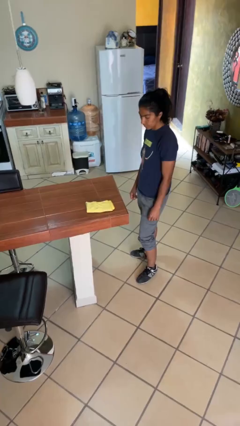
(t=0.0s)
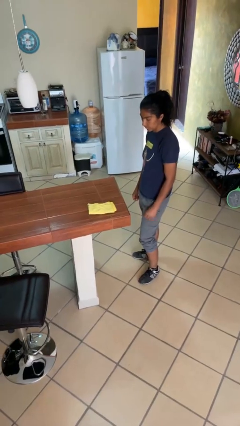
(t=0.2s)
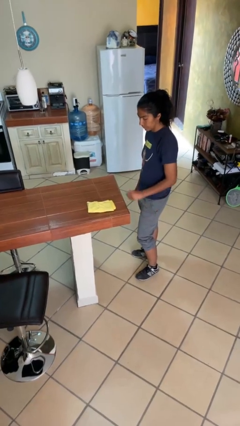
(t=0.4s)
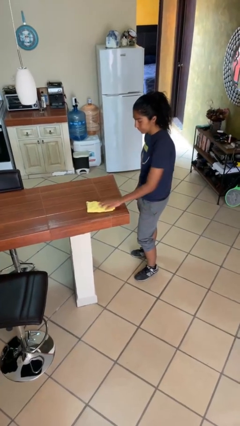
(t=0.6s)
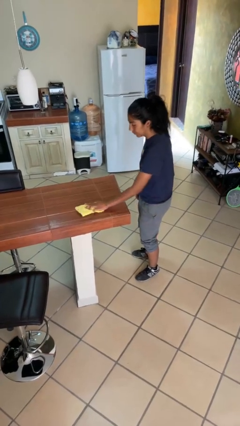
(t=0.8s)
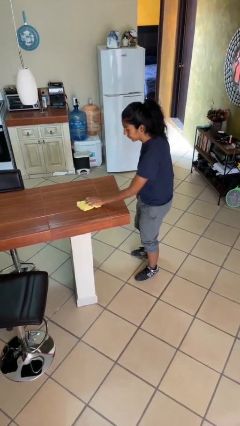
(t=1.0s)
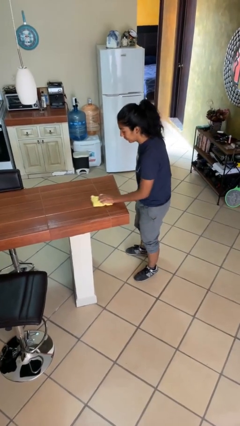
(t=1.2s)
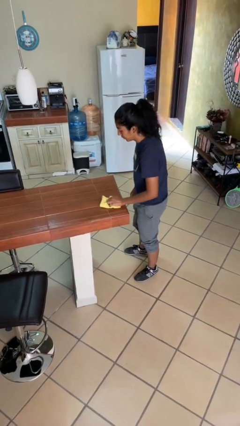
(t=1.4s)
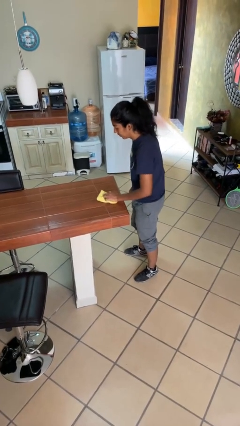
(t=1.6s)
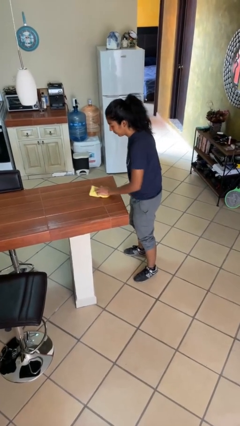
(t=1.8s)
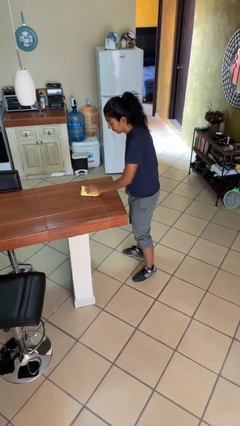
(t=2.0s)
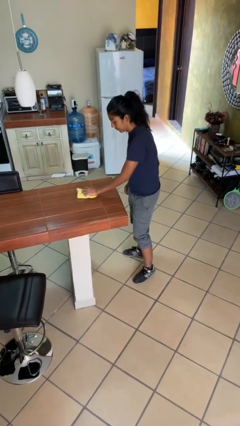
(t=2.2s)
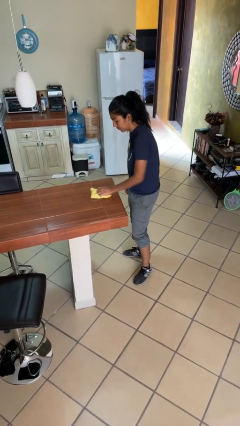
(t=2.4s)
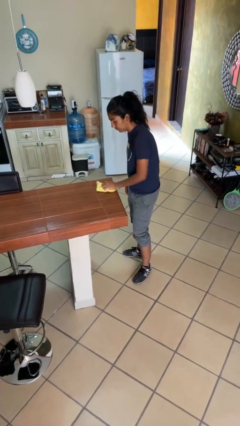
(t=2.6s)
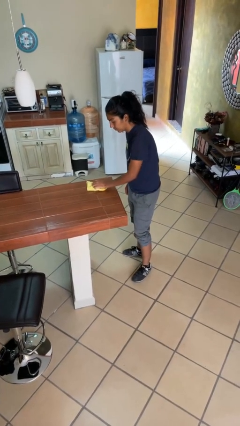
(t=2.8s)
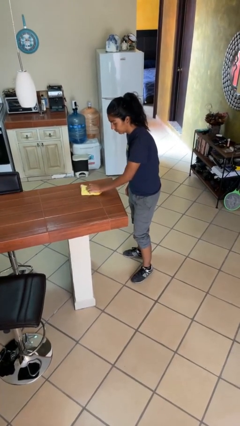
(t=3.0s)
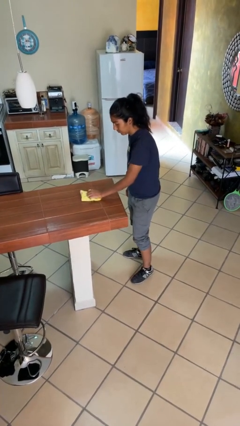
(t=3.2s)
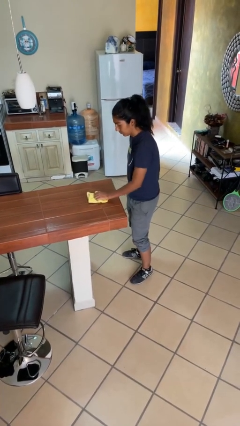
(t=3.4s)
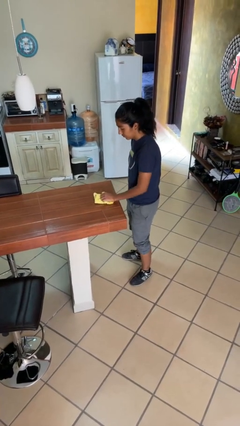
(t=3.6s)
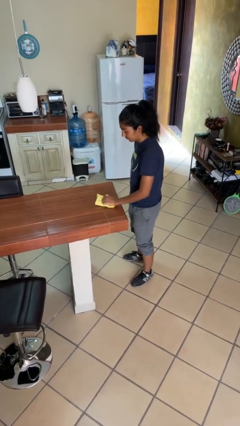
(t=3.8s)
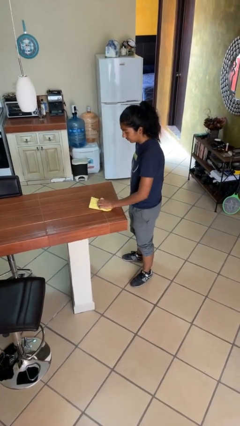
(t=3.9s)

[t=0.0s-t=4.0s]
person cleans table with rag

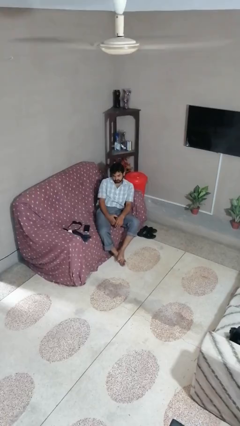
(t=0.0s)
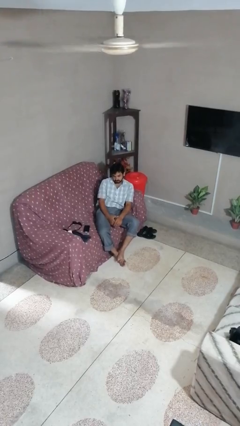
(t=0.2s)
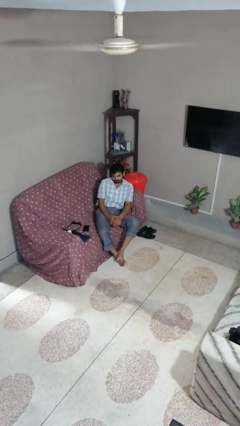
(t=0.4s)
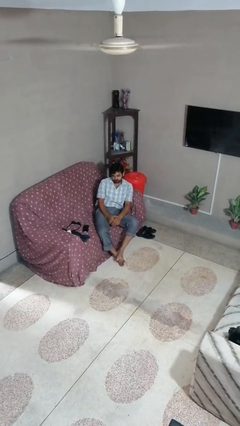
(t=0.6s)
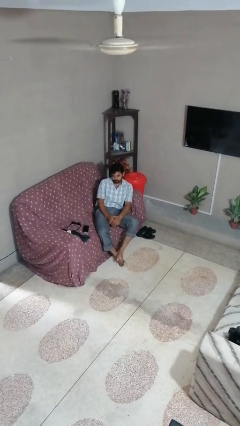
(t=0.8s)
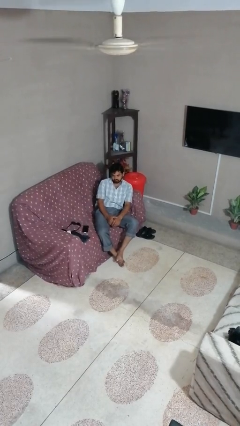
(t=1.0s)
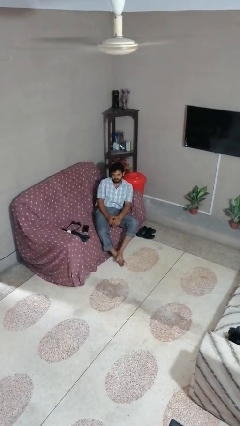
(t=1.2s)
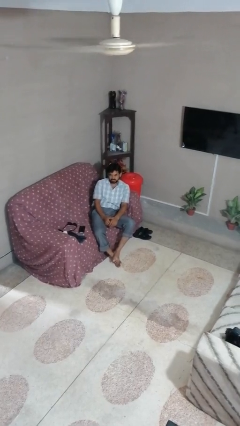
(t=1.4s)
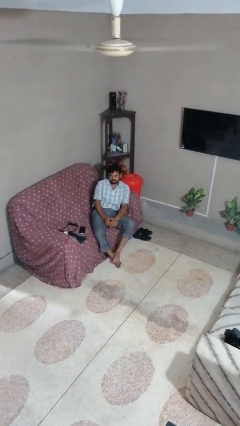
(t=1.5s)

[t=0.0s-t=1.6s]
person claps hands

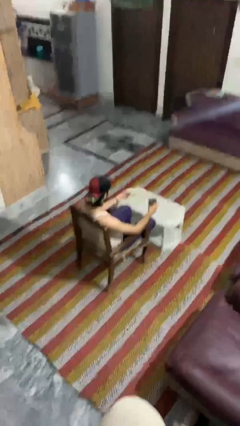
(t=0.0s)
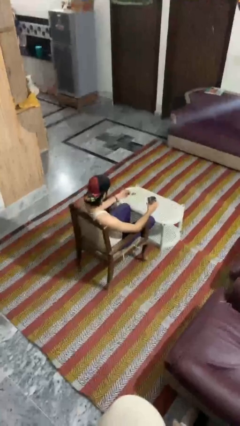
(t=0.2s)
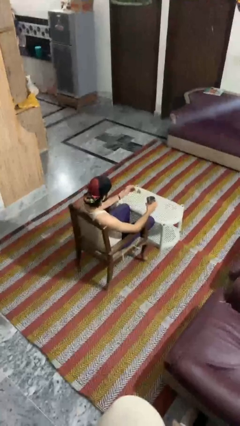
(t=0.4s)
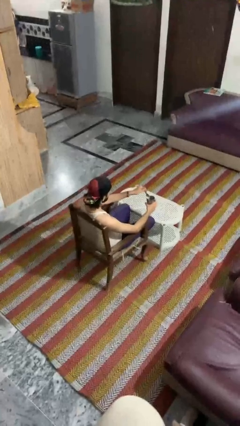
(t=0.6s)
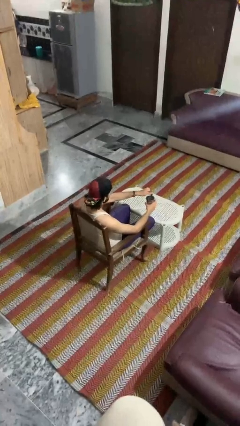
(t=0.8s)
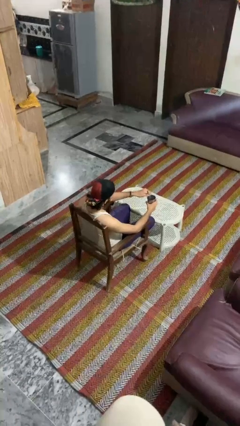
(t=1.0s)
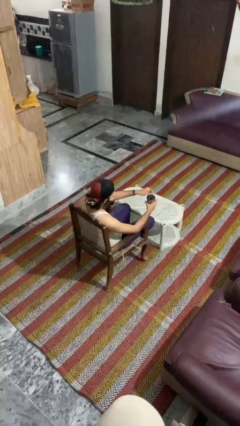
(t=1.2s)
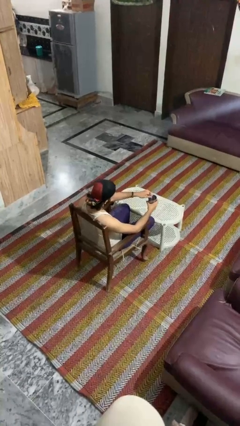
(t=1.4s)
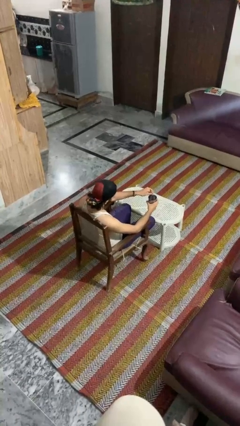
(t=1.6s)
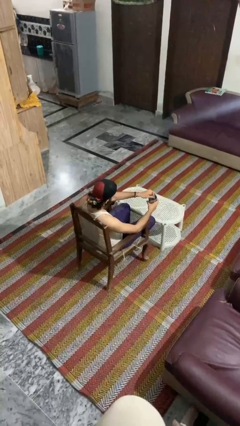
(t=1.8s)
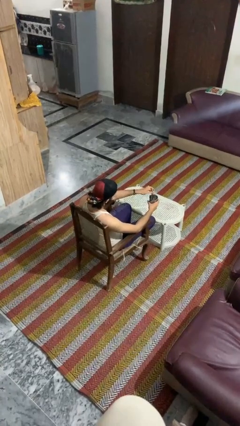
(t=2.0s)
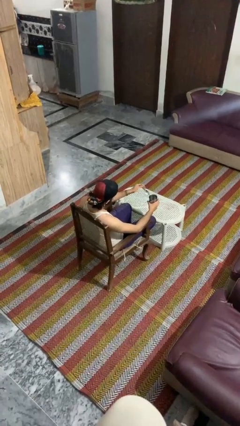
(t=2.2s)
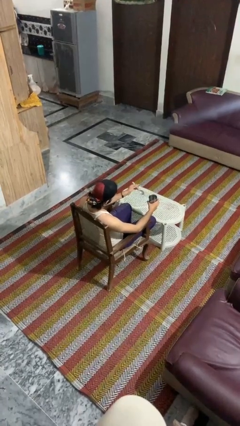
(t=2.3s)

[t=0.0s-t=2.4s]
person stirs mug

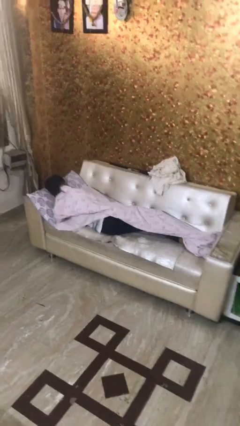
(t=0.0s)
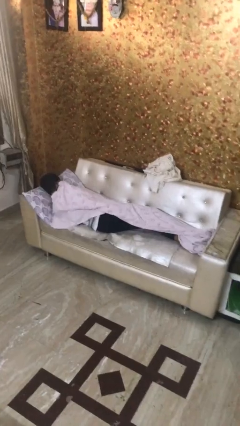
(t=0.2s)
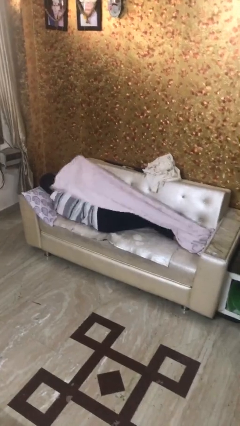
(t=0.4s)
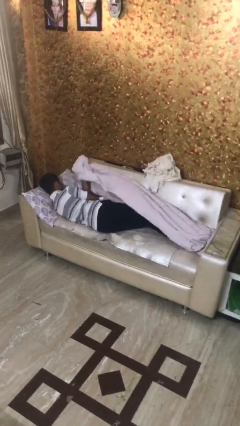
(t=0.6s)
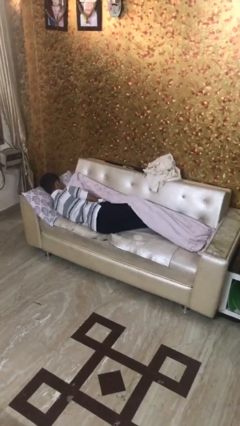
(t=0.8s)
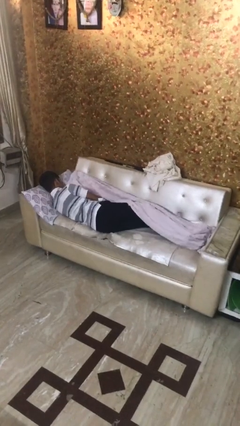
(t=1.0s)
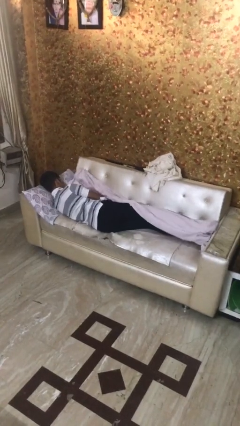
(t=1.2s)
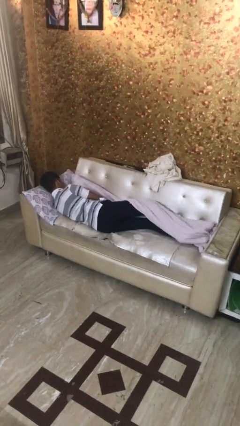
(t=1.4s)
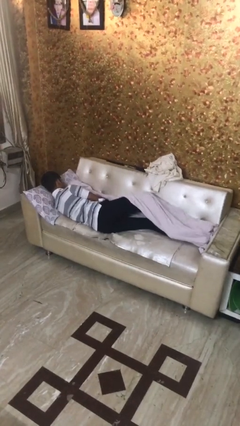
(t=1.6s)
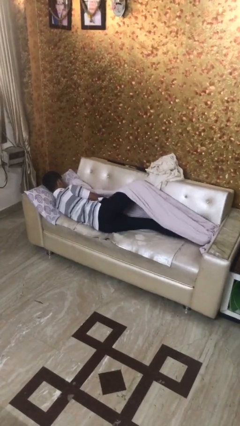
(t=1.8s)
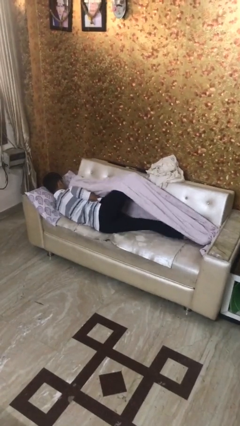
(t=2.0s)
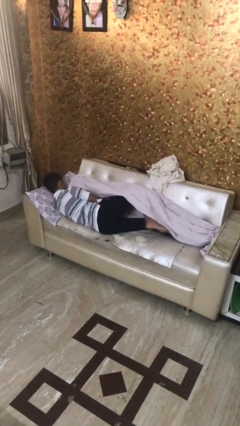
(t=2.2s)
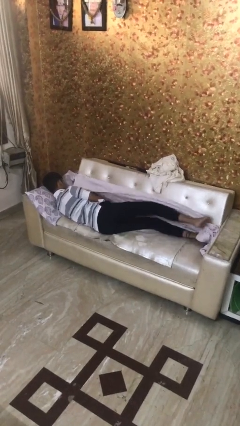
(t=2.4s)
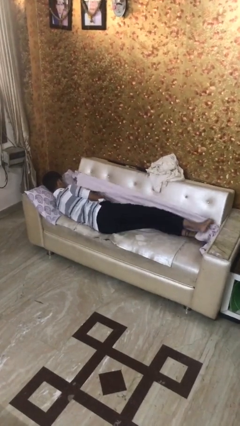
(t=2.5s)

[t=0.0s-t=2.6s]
person uncovers with bedsheets

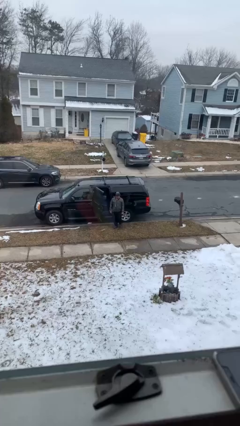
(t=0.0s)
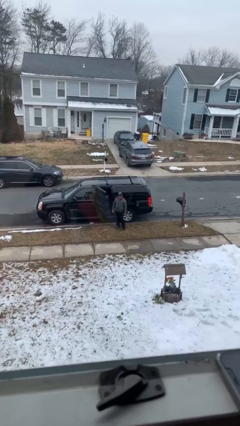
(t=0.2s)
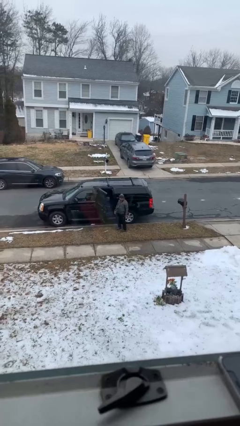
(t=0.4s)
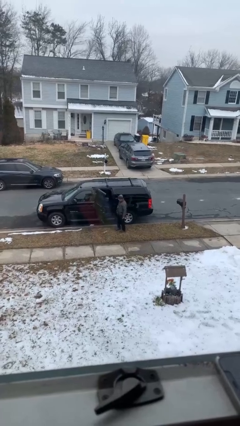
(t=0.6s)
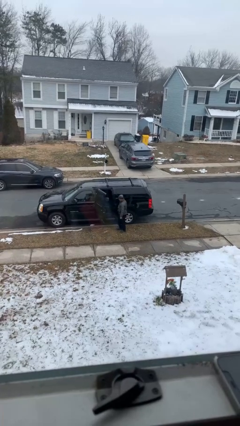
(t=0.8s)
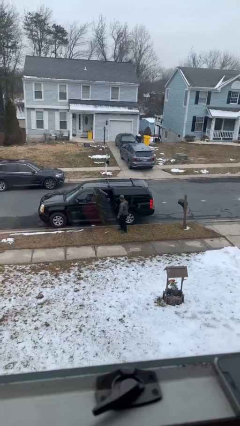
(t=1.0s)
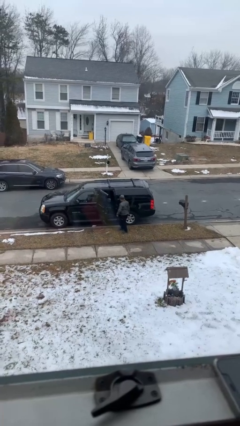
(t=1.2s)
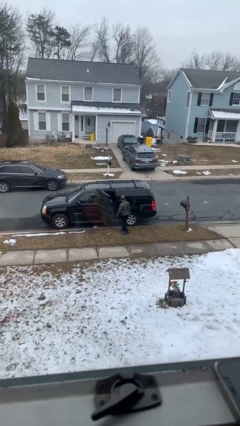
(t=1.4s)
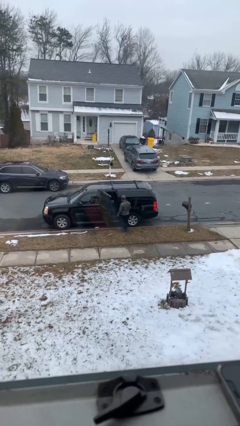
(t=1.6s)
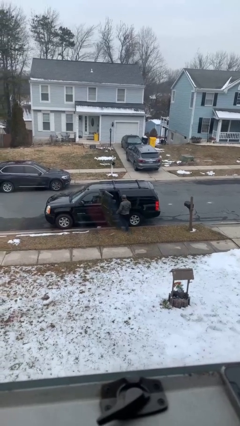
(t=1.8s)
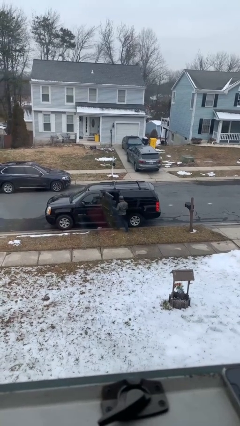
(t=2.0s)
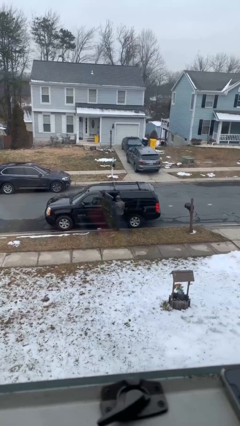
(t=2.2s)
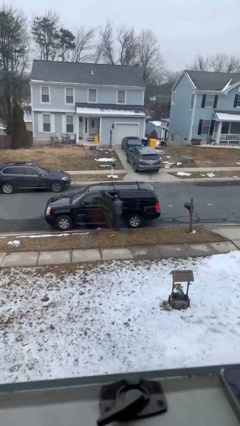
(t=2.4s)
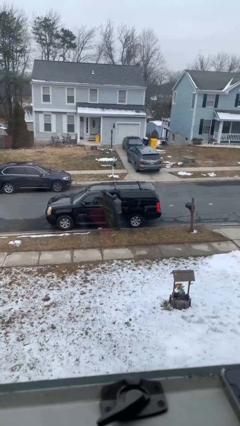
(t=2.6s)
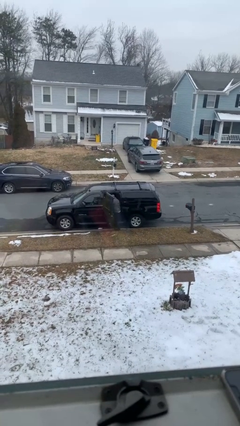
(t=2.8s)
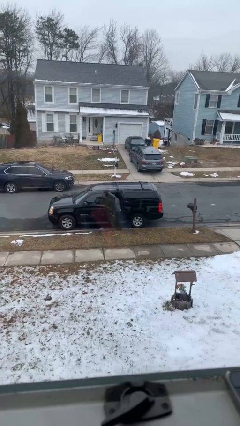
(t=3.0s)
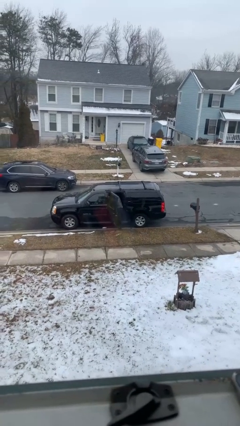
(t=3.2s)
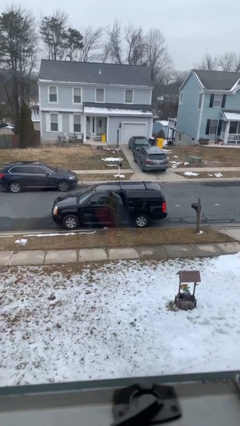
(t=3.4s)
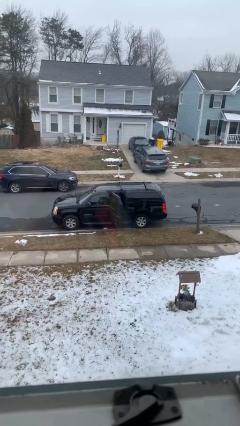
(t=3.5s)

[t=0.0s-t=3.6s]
person enters car

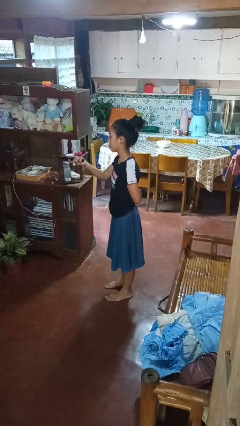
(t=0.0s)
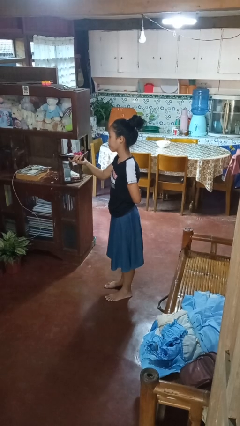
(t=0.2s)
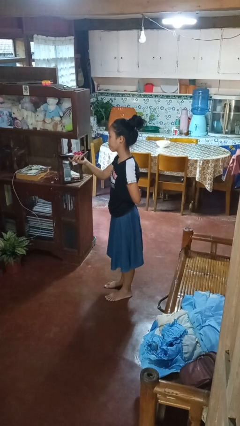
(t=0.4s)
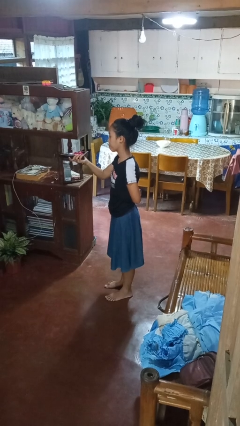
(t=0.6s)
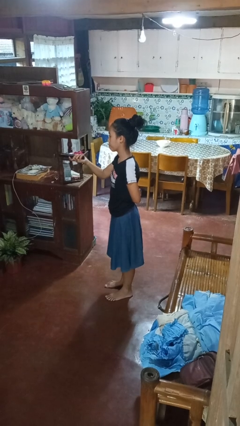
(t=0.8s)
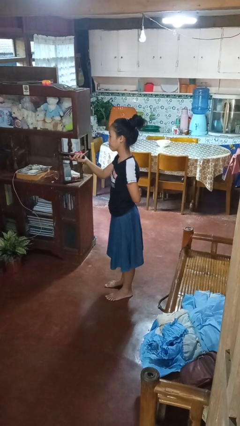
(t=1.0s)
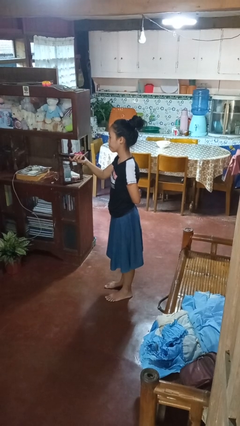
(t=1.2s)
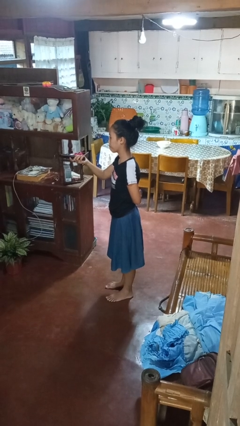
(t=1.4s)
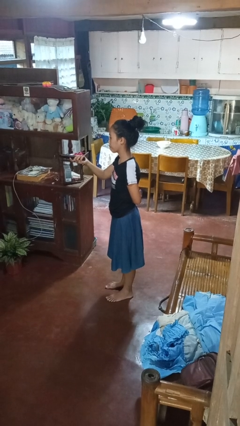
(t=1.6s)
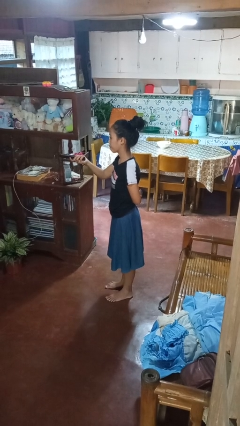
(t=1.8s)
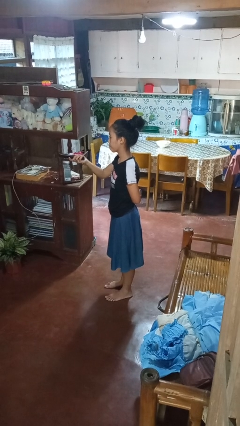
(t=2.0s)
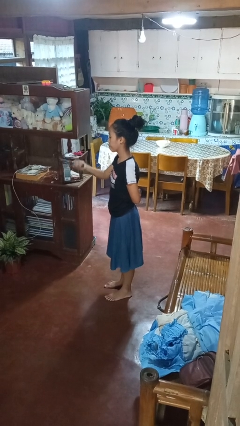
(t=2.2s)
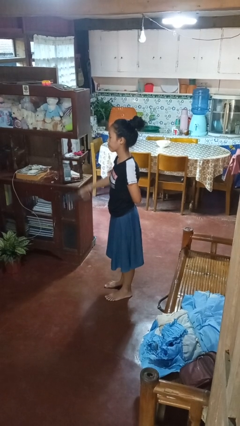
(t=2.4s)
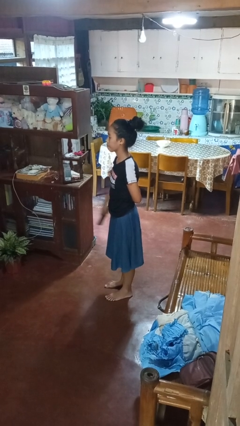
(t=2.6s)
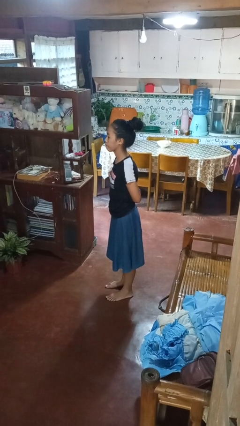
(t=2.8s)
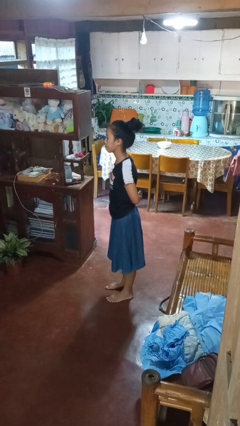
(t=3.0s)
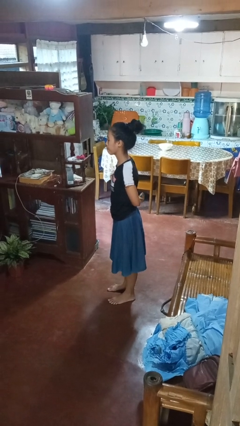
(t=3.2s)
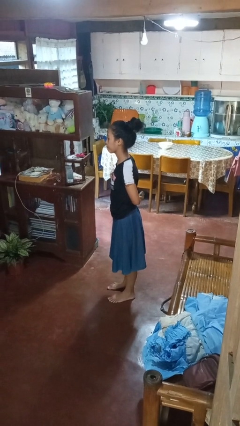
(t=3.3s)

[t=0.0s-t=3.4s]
person uses television remote
